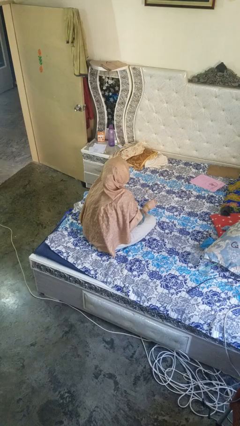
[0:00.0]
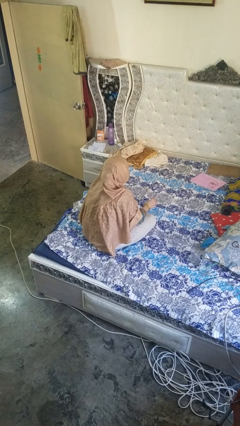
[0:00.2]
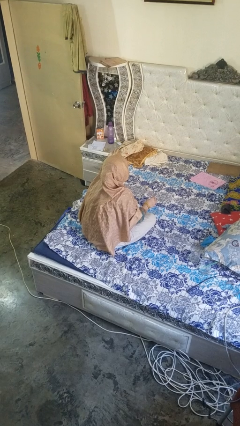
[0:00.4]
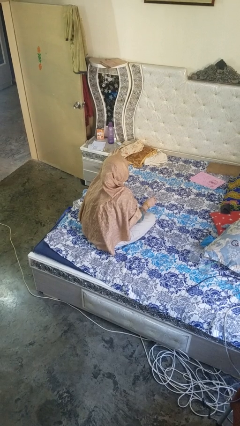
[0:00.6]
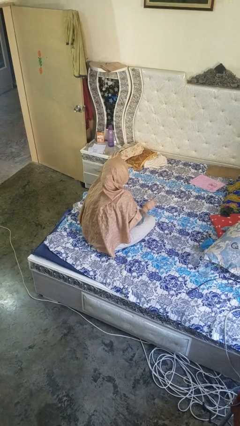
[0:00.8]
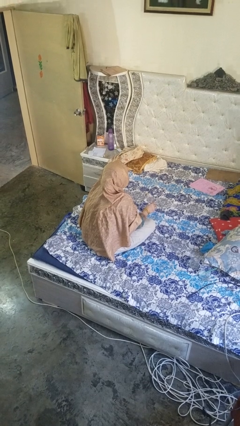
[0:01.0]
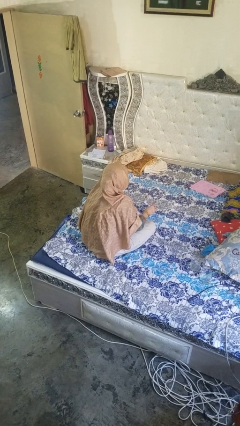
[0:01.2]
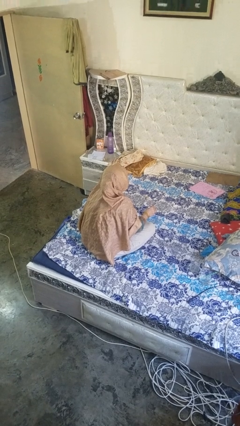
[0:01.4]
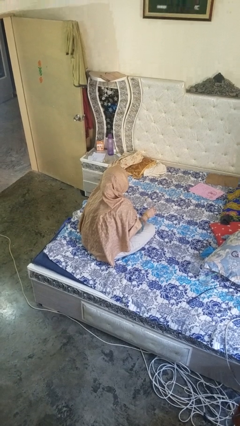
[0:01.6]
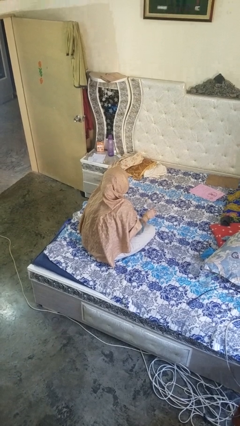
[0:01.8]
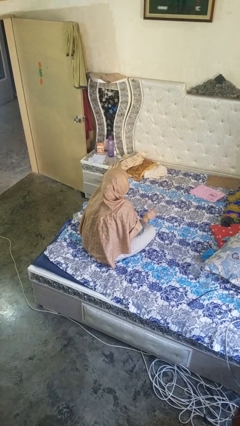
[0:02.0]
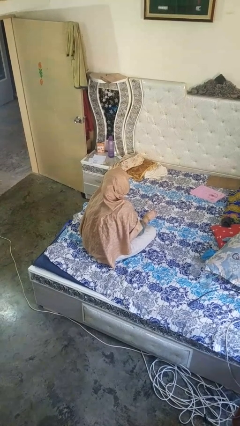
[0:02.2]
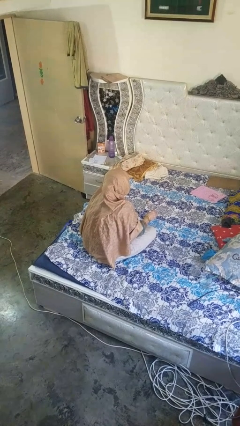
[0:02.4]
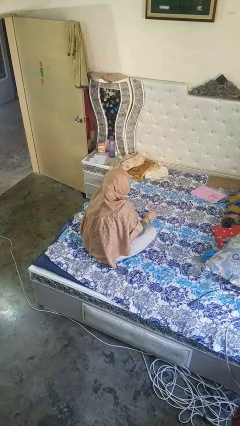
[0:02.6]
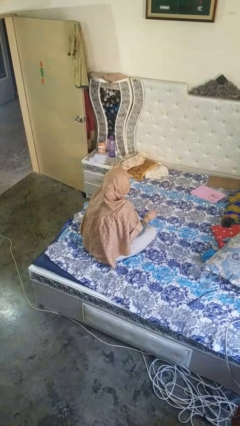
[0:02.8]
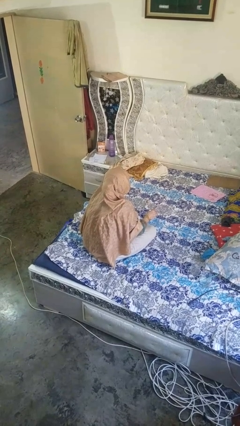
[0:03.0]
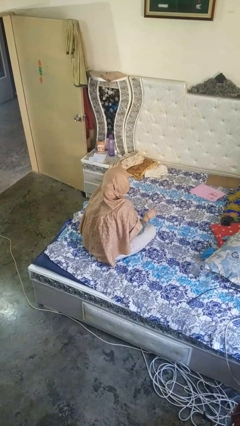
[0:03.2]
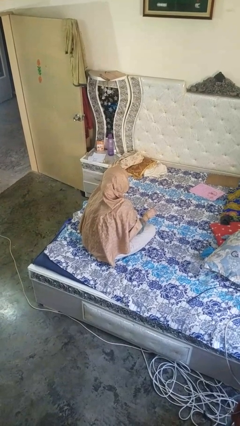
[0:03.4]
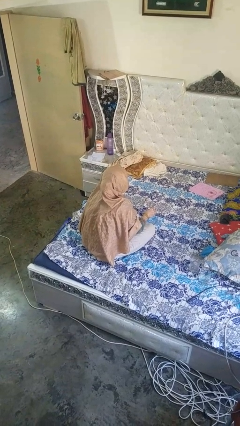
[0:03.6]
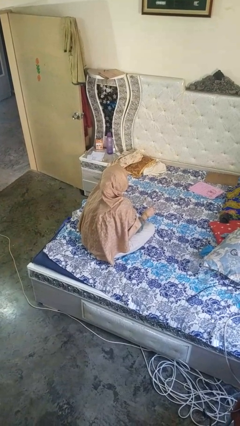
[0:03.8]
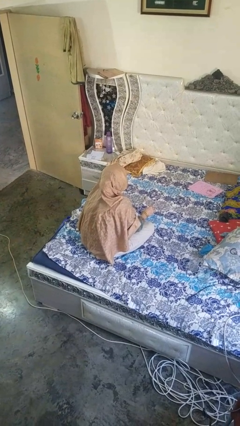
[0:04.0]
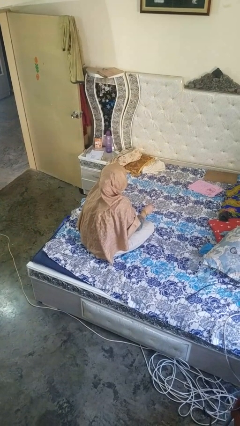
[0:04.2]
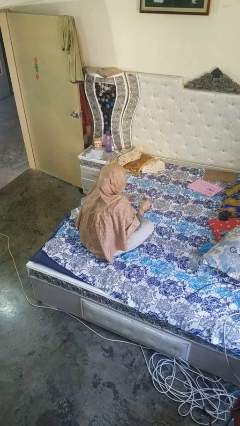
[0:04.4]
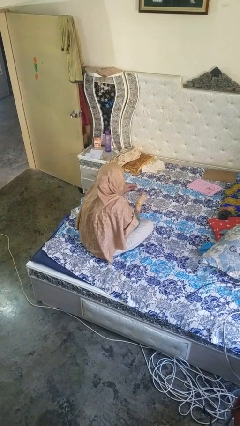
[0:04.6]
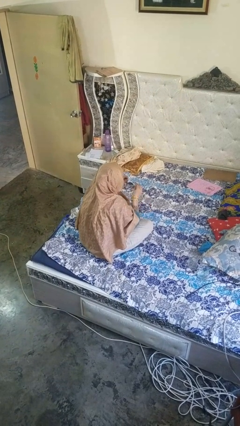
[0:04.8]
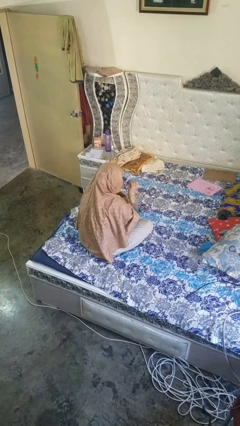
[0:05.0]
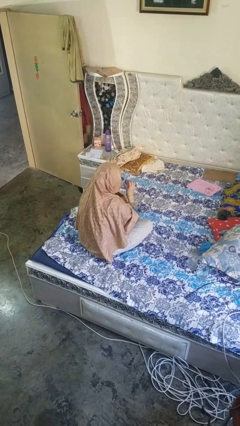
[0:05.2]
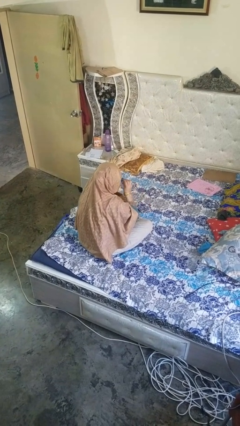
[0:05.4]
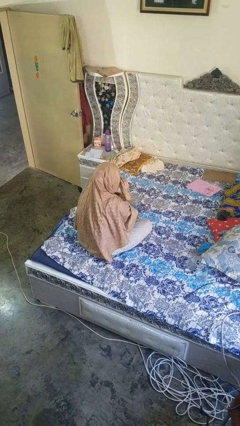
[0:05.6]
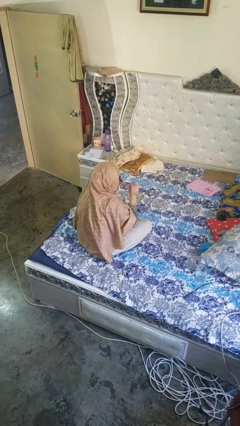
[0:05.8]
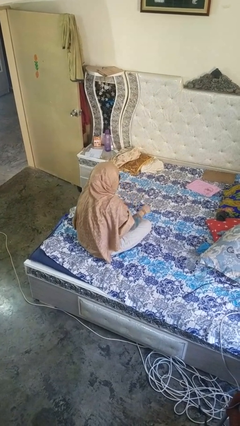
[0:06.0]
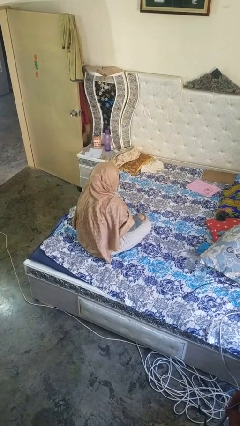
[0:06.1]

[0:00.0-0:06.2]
person puts on glasses

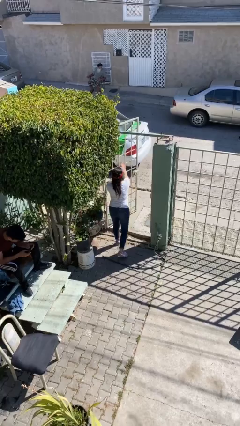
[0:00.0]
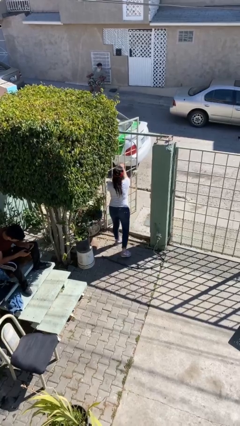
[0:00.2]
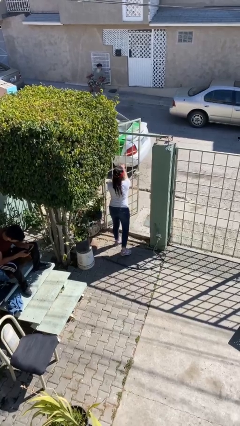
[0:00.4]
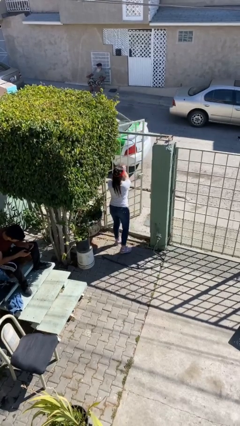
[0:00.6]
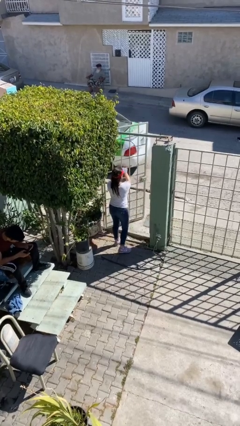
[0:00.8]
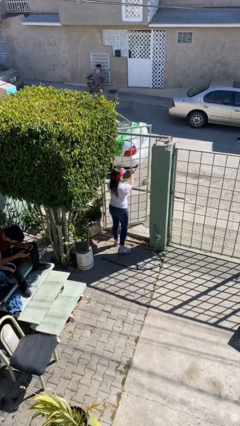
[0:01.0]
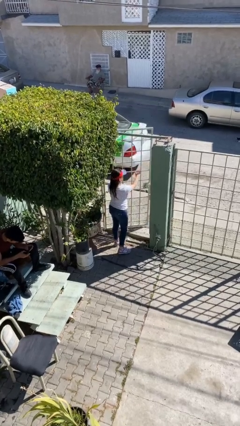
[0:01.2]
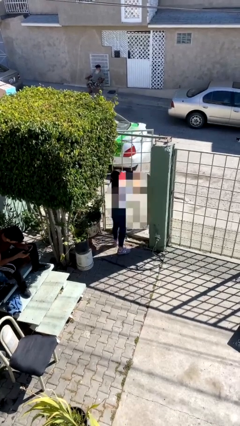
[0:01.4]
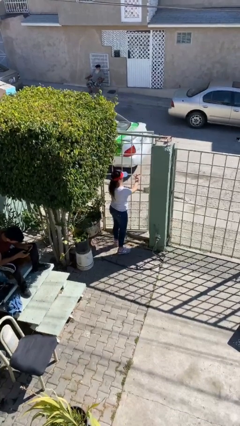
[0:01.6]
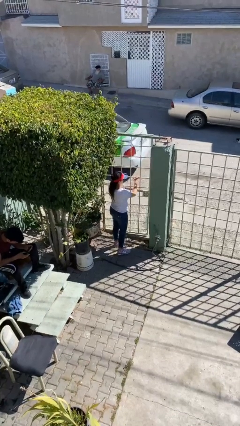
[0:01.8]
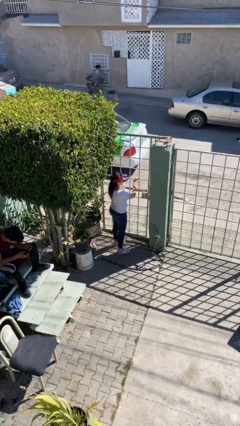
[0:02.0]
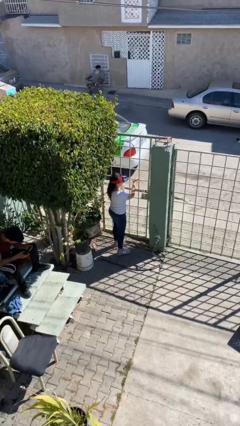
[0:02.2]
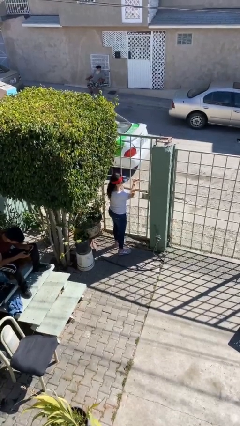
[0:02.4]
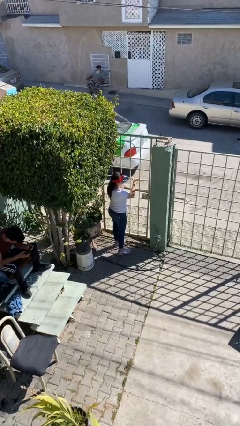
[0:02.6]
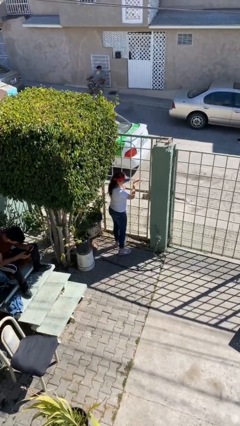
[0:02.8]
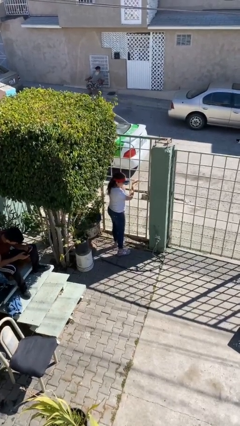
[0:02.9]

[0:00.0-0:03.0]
person closes facility door

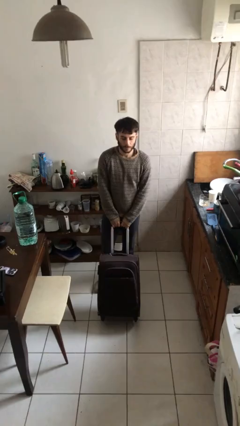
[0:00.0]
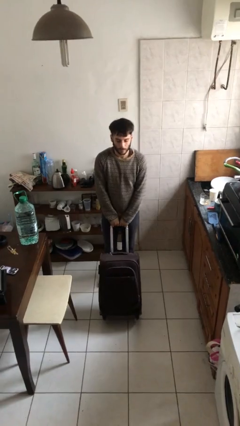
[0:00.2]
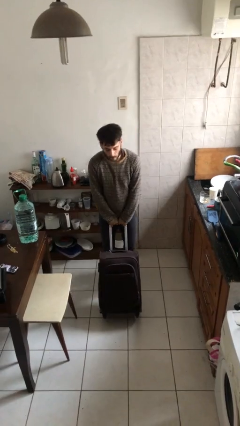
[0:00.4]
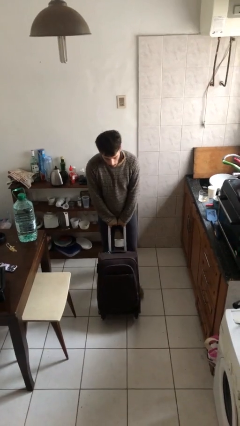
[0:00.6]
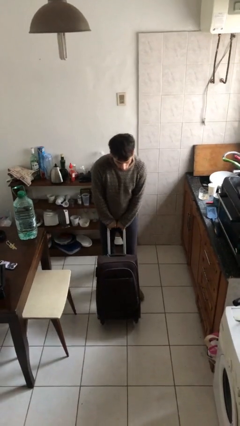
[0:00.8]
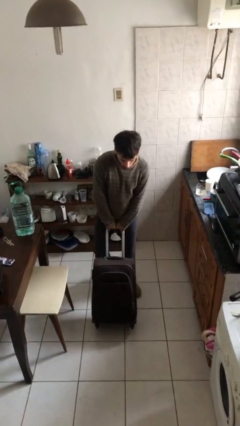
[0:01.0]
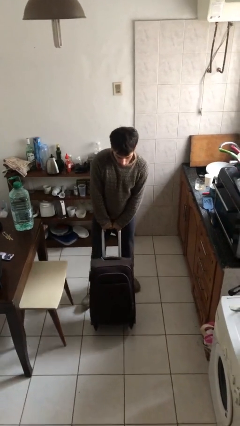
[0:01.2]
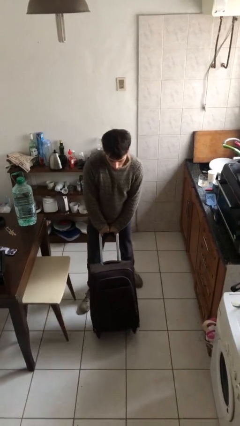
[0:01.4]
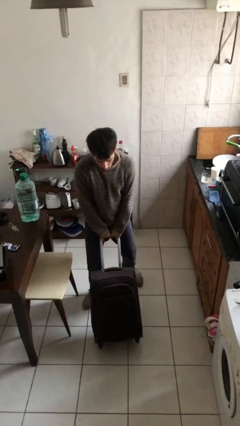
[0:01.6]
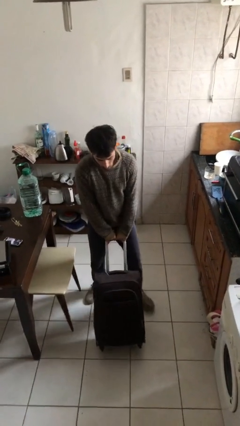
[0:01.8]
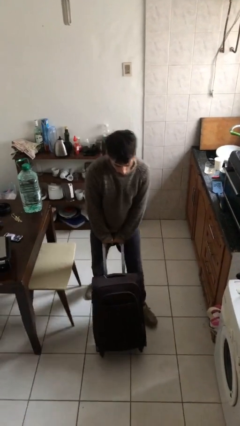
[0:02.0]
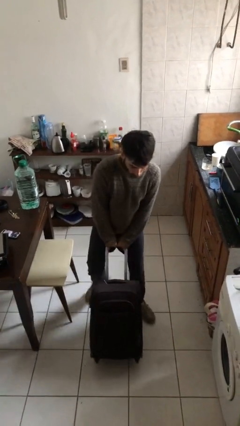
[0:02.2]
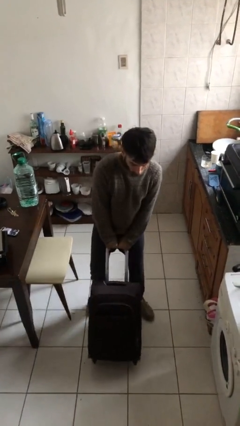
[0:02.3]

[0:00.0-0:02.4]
person pushes wheeled cart

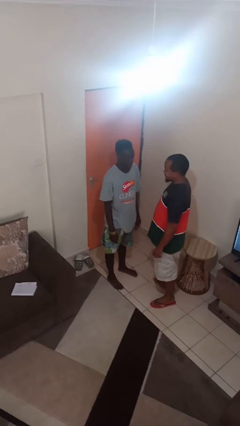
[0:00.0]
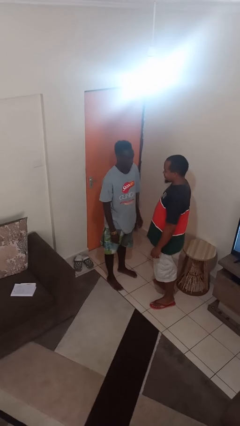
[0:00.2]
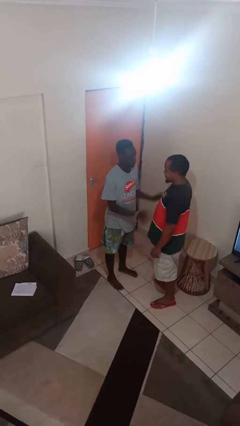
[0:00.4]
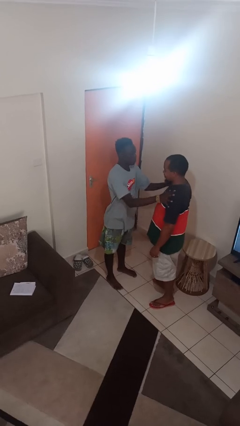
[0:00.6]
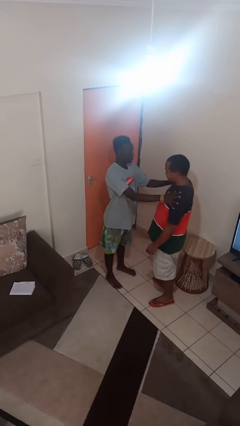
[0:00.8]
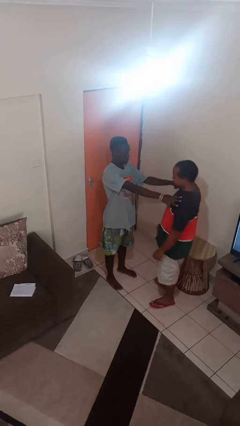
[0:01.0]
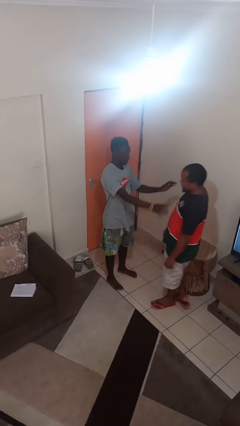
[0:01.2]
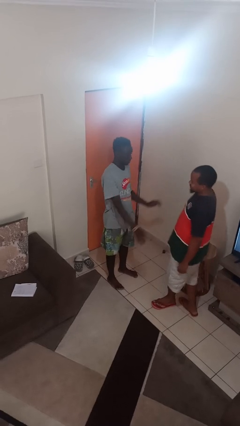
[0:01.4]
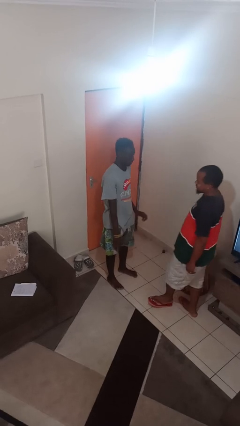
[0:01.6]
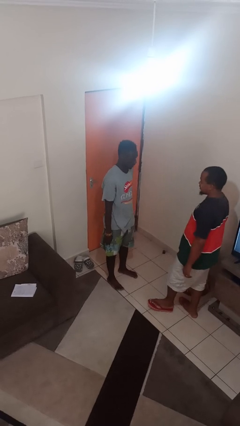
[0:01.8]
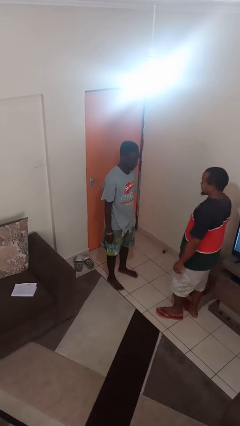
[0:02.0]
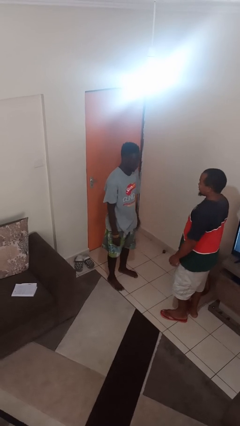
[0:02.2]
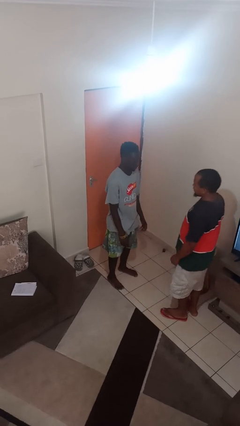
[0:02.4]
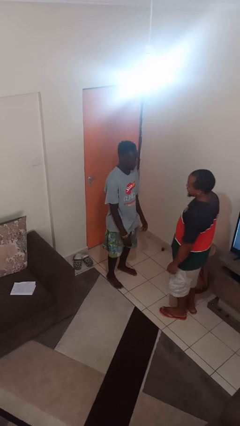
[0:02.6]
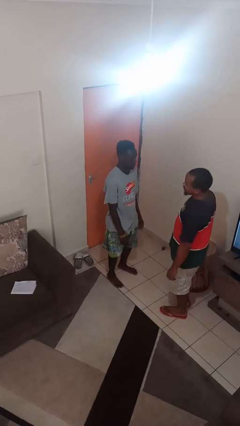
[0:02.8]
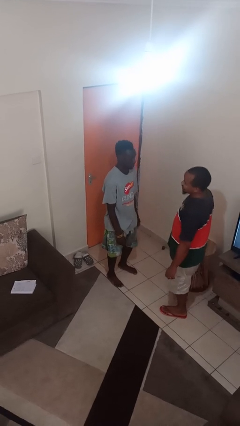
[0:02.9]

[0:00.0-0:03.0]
person shoves person

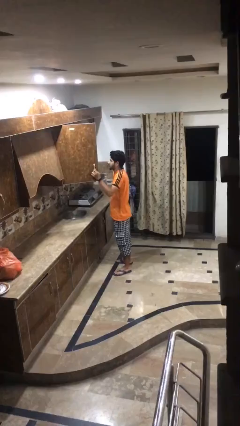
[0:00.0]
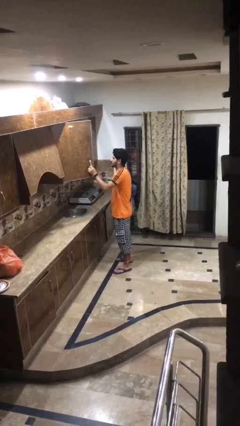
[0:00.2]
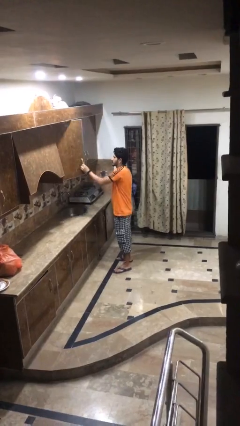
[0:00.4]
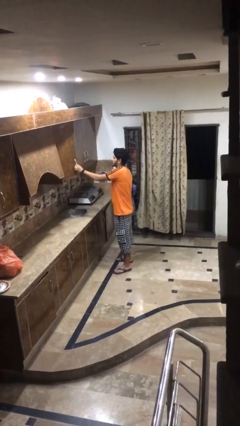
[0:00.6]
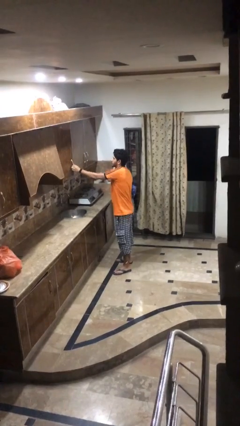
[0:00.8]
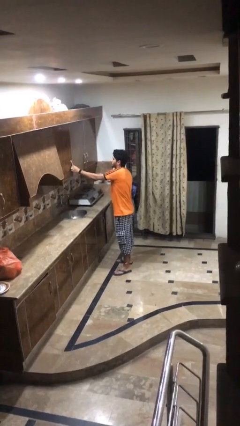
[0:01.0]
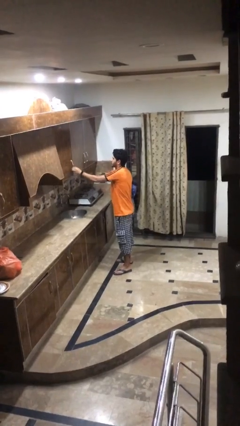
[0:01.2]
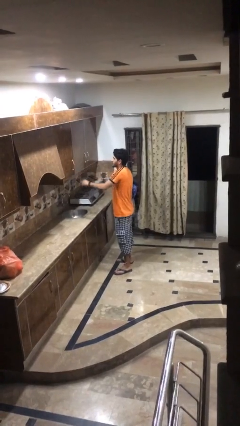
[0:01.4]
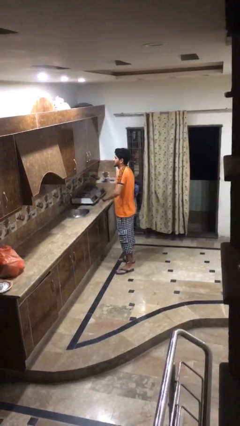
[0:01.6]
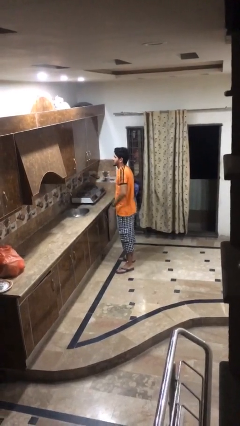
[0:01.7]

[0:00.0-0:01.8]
person closes kitchen drawer

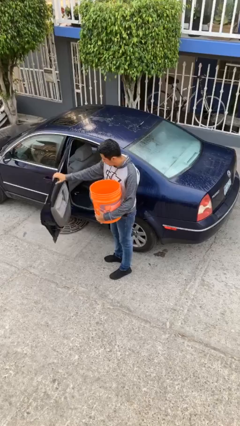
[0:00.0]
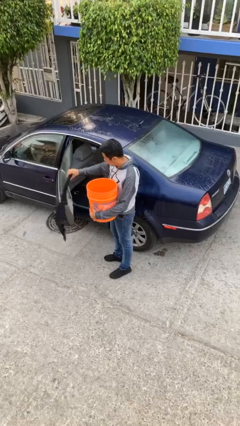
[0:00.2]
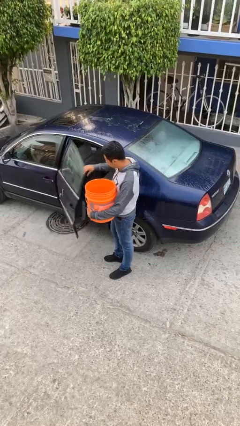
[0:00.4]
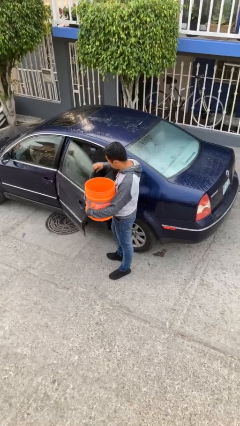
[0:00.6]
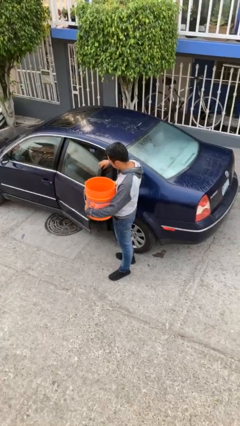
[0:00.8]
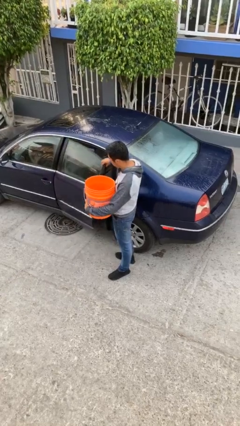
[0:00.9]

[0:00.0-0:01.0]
person closes car door
